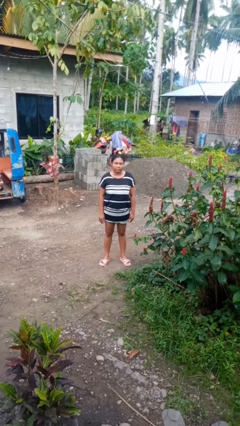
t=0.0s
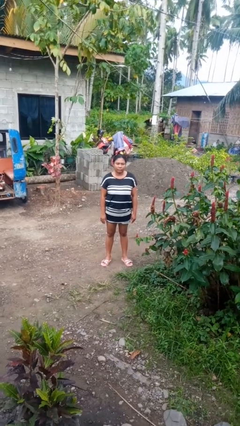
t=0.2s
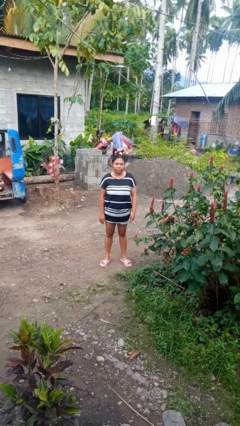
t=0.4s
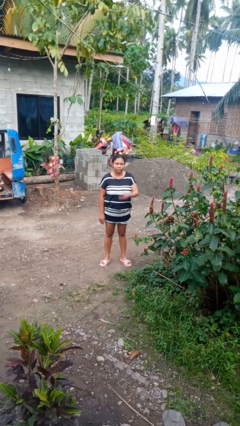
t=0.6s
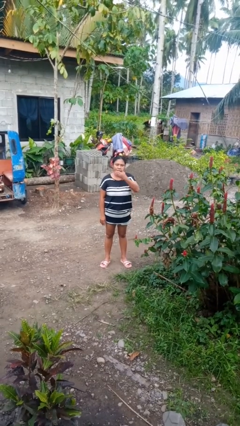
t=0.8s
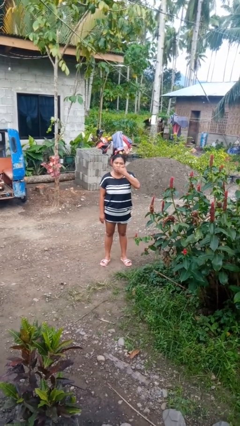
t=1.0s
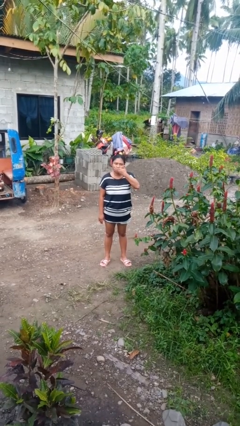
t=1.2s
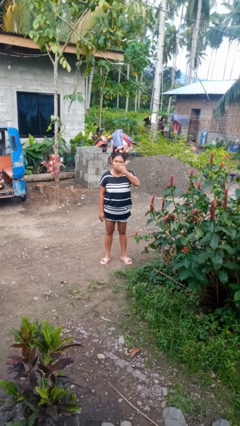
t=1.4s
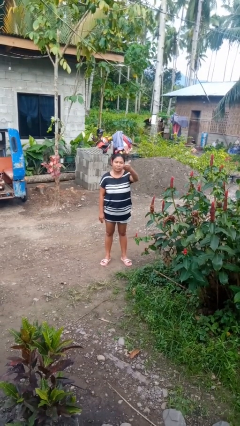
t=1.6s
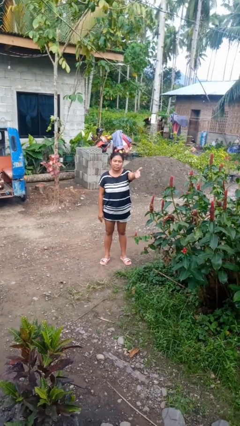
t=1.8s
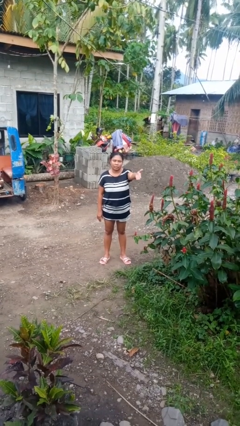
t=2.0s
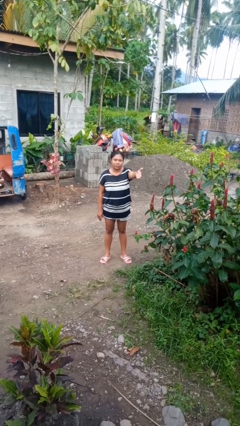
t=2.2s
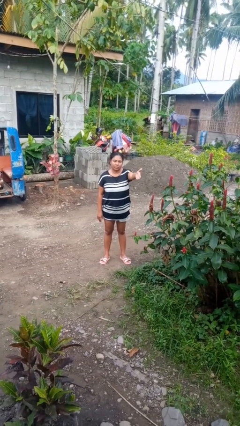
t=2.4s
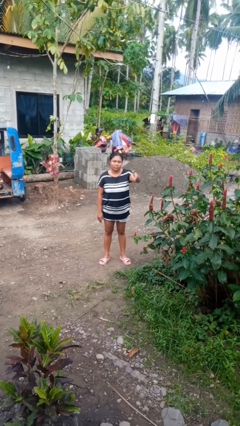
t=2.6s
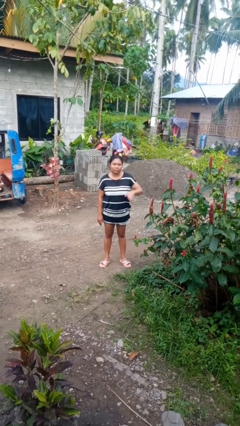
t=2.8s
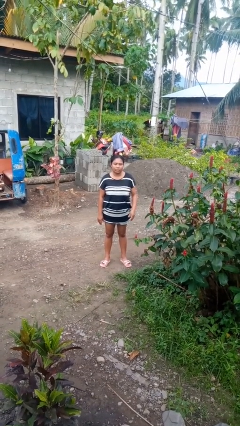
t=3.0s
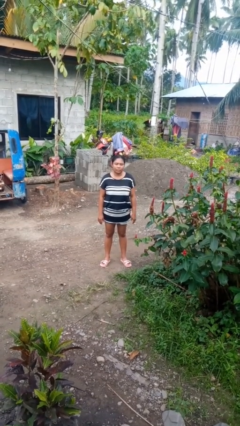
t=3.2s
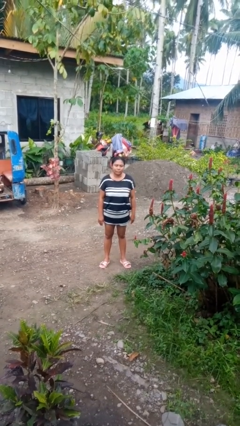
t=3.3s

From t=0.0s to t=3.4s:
person gestures blow kiss

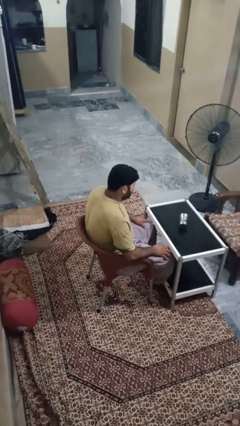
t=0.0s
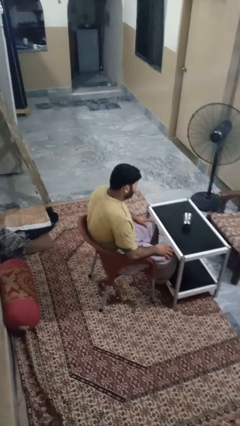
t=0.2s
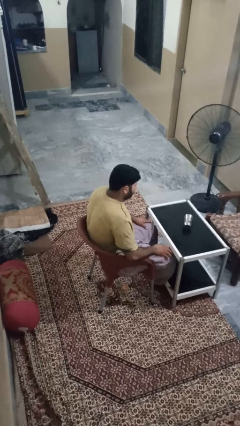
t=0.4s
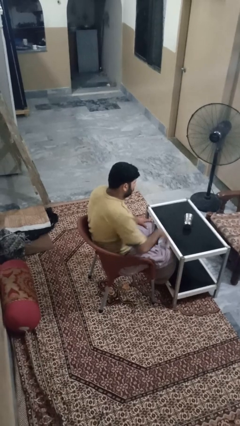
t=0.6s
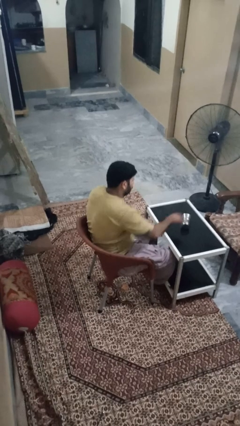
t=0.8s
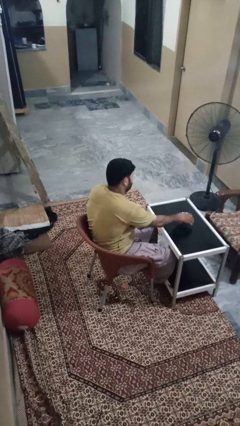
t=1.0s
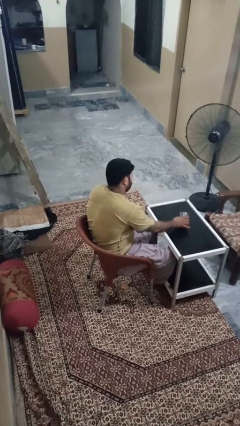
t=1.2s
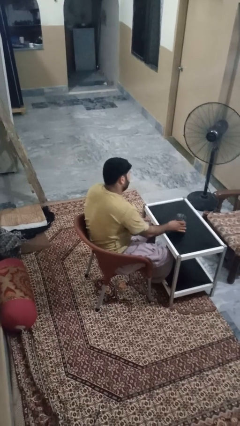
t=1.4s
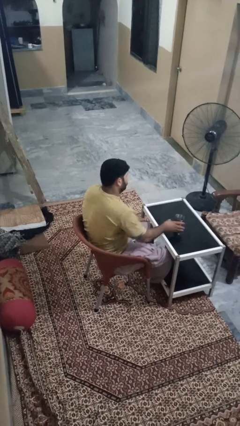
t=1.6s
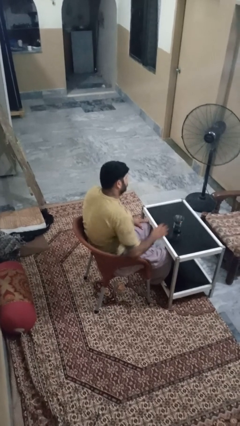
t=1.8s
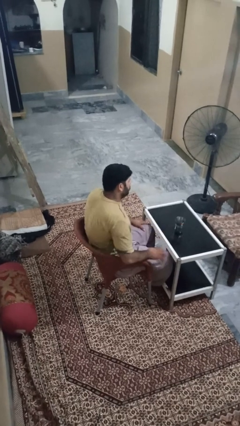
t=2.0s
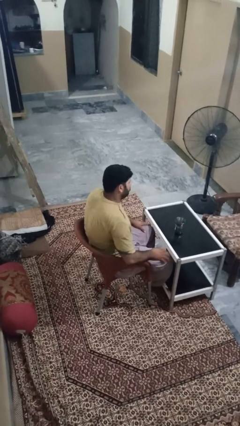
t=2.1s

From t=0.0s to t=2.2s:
person sets upright glass

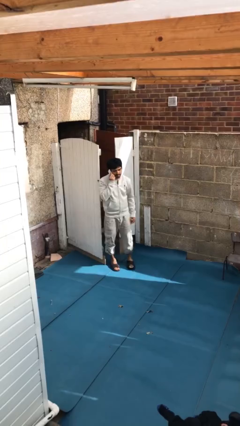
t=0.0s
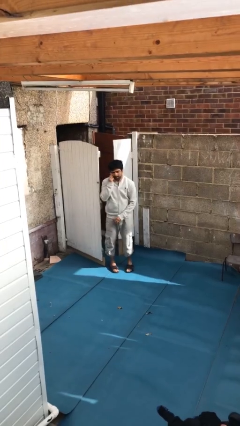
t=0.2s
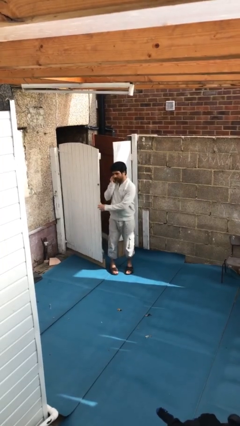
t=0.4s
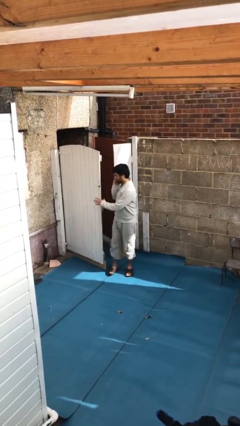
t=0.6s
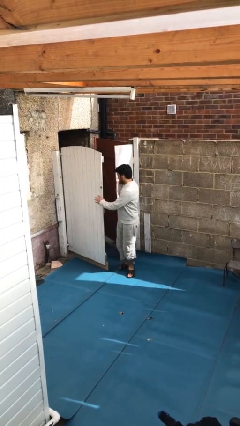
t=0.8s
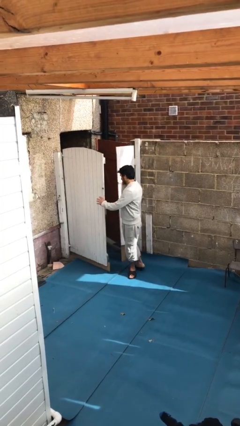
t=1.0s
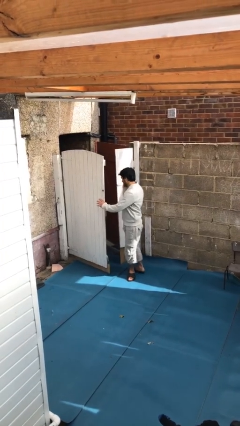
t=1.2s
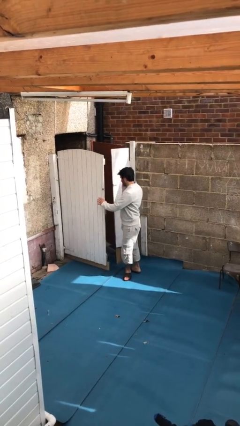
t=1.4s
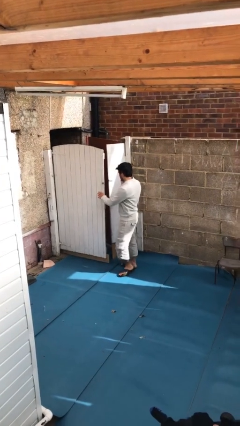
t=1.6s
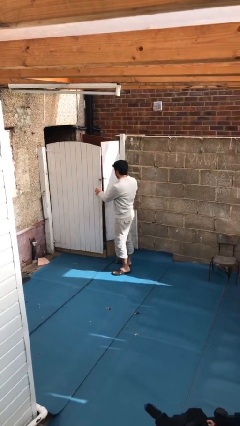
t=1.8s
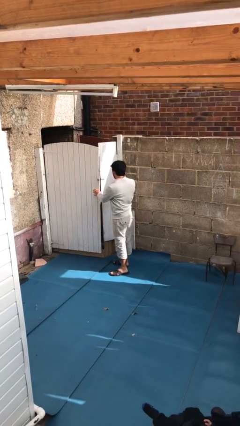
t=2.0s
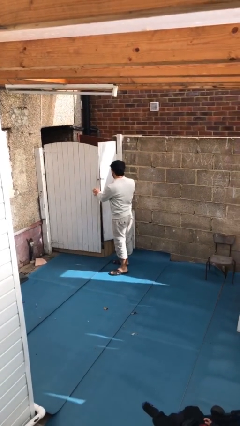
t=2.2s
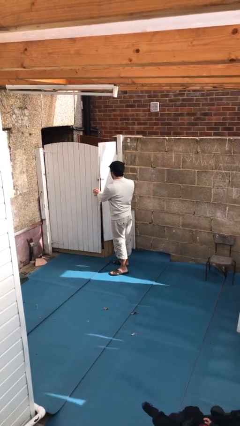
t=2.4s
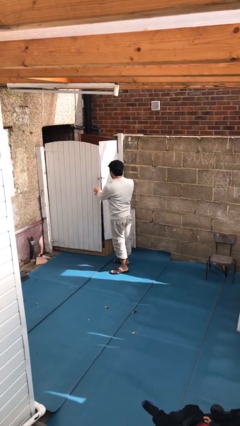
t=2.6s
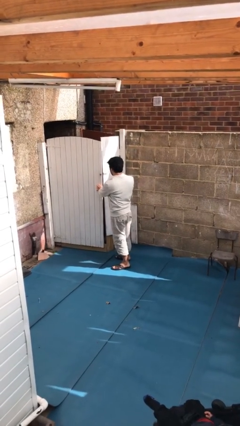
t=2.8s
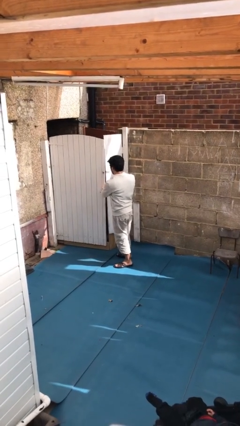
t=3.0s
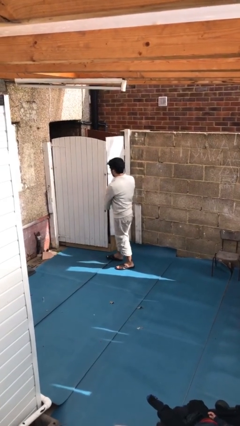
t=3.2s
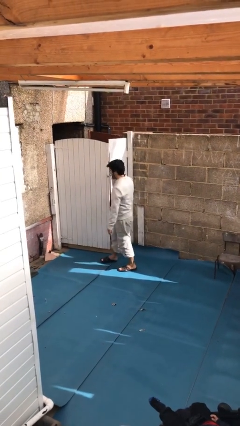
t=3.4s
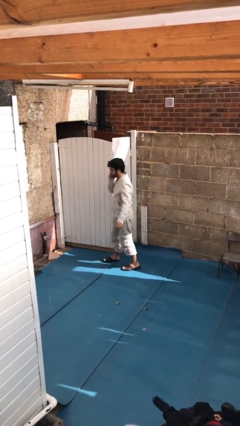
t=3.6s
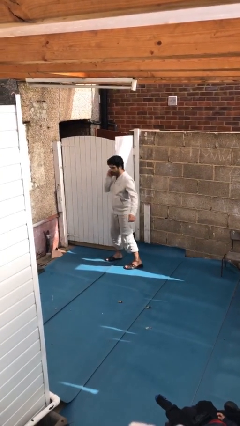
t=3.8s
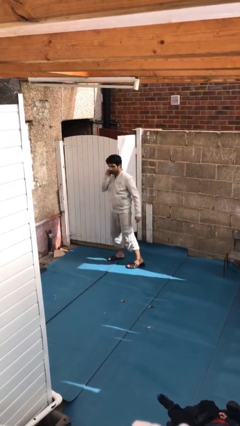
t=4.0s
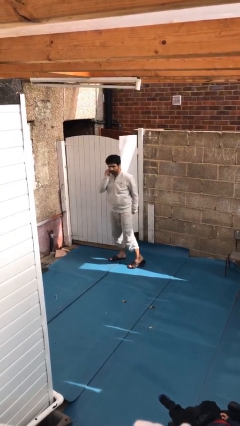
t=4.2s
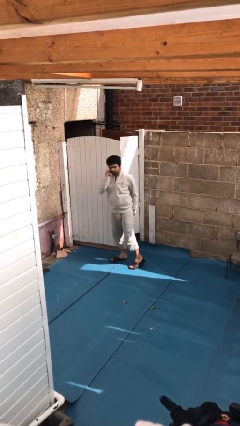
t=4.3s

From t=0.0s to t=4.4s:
person closes facility door

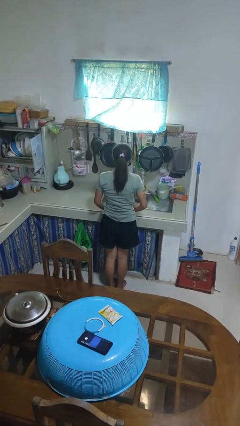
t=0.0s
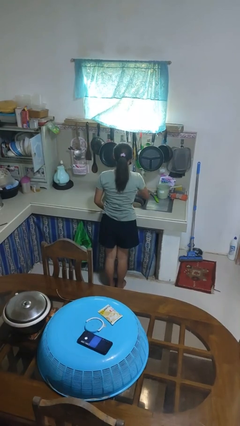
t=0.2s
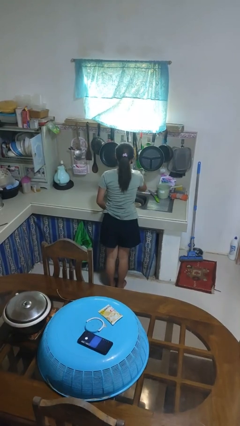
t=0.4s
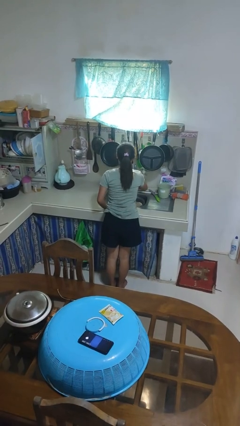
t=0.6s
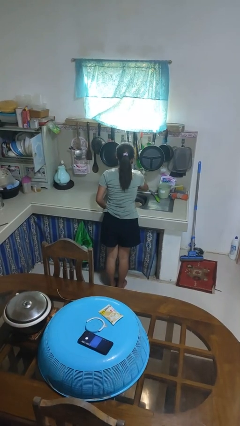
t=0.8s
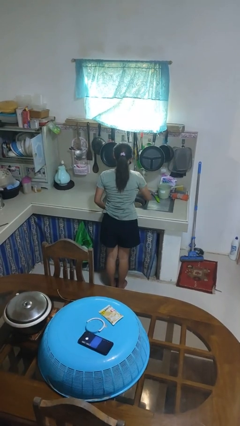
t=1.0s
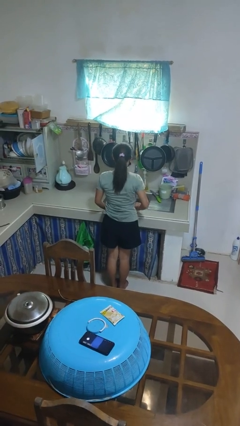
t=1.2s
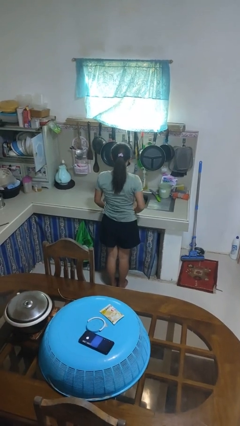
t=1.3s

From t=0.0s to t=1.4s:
person turns off faucet

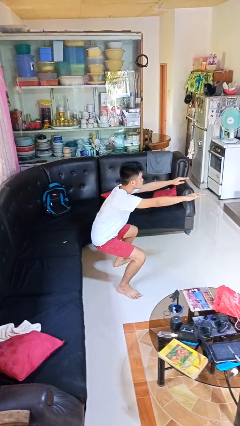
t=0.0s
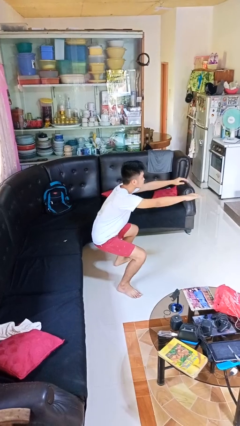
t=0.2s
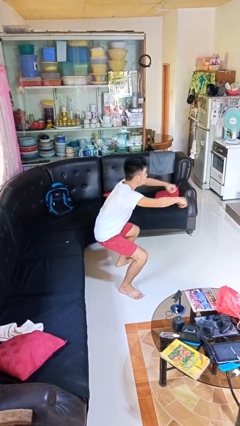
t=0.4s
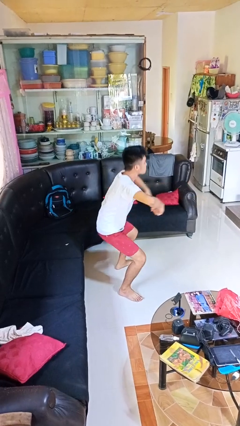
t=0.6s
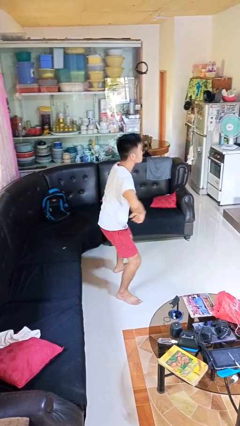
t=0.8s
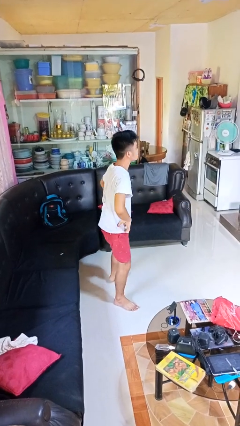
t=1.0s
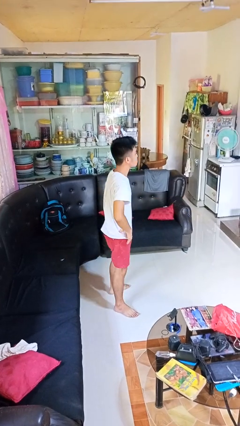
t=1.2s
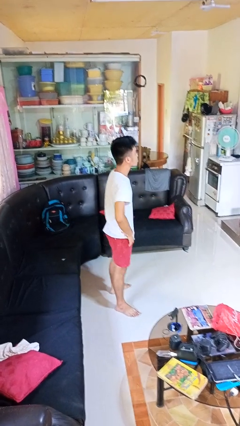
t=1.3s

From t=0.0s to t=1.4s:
person stands up

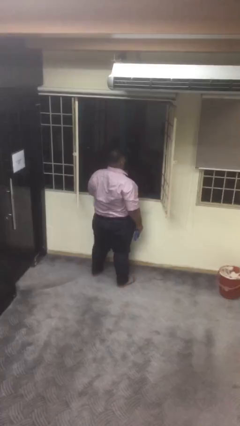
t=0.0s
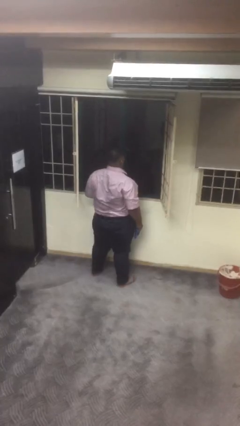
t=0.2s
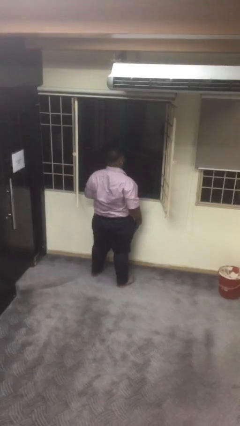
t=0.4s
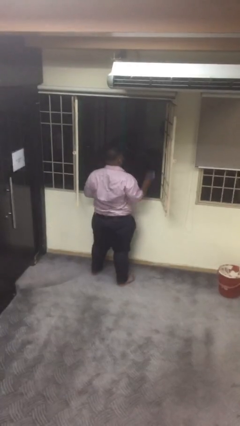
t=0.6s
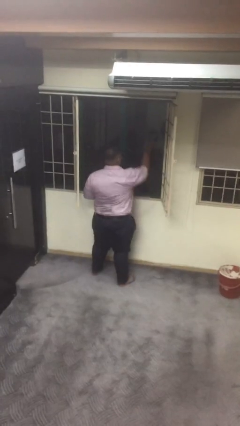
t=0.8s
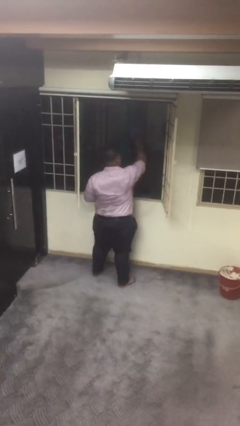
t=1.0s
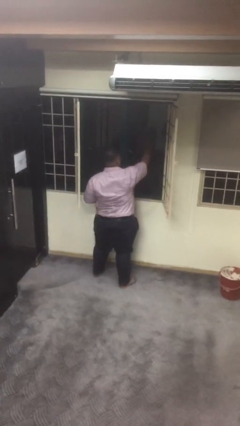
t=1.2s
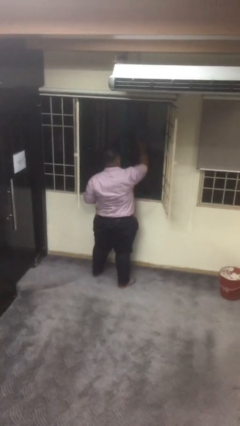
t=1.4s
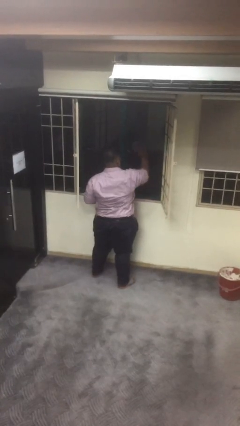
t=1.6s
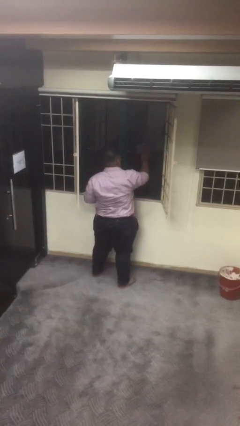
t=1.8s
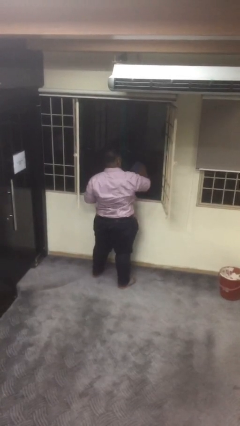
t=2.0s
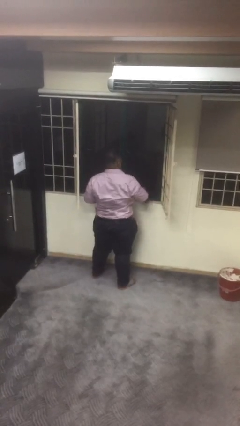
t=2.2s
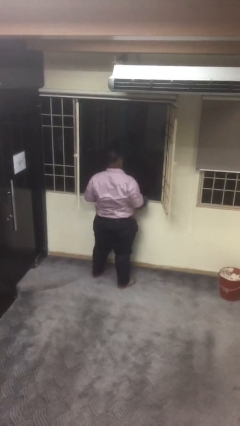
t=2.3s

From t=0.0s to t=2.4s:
person washes window

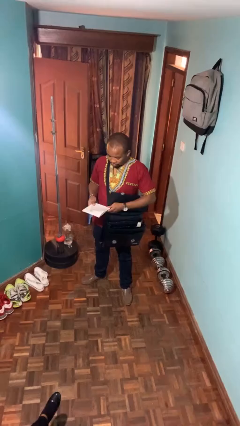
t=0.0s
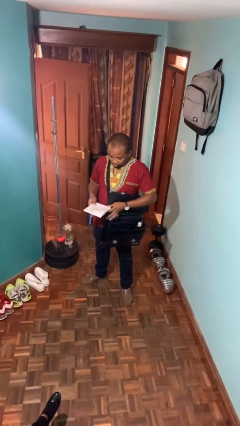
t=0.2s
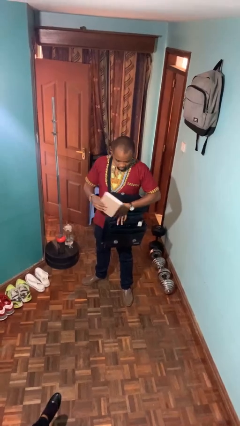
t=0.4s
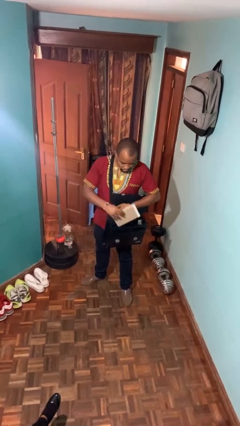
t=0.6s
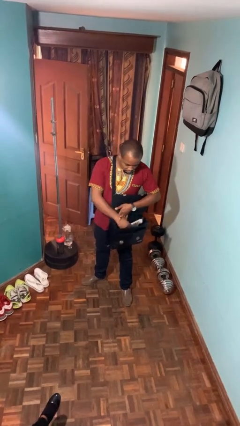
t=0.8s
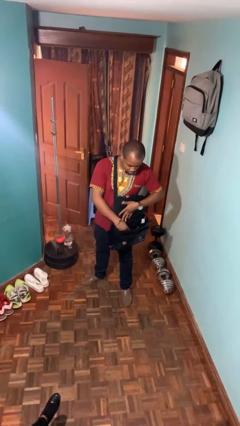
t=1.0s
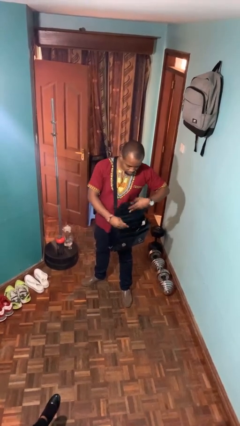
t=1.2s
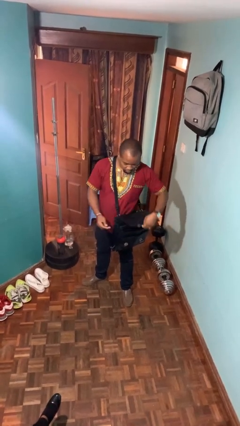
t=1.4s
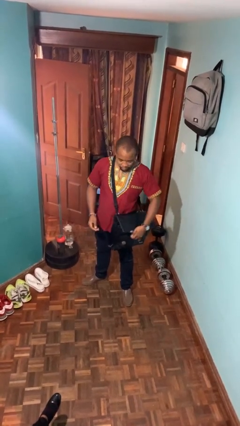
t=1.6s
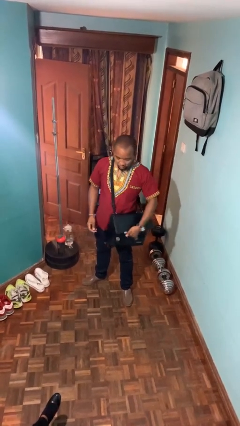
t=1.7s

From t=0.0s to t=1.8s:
person puts object into purse

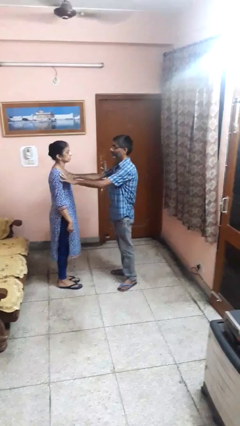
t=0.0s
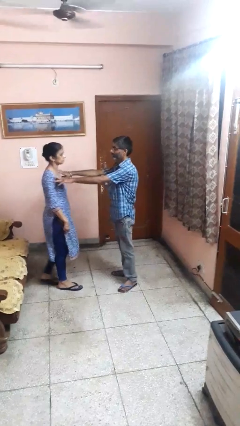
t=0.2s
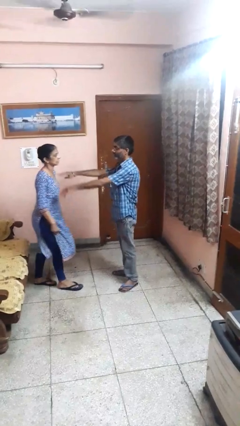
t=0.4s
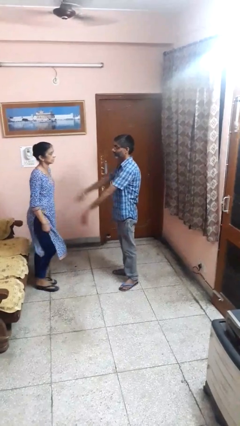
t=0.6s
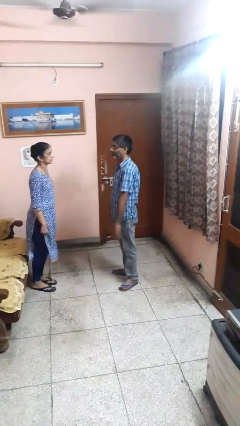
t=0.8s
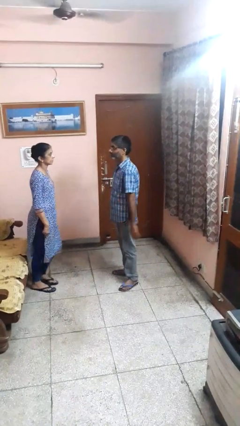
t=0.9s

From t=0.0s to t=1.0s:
person shoves person
